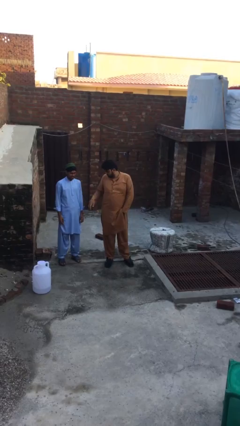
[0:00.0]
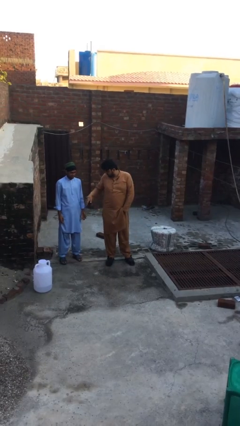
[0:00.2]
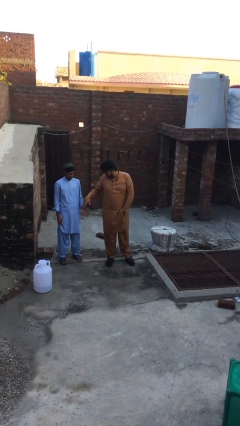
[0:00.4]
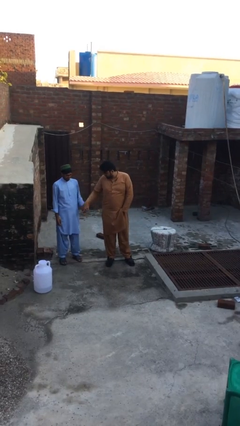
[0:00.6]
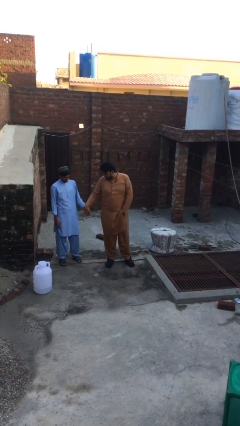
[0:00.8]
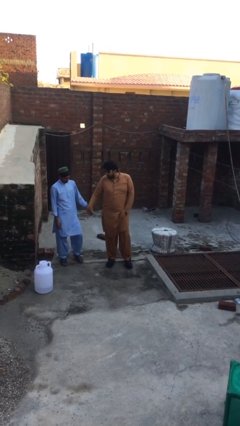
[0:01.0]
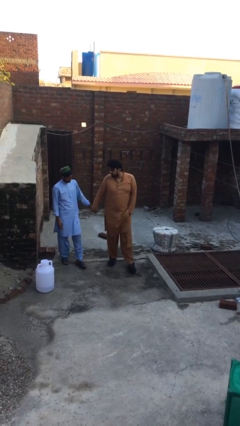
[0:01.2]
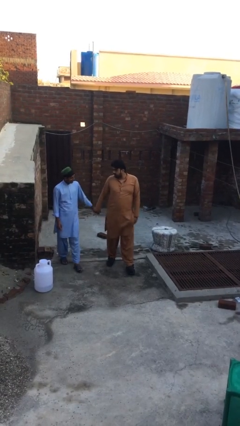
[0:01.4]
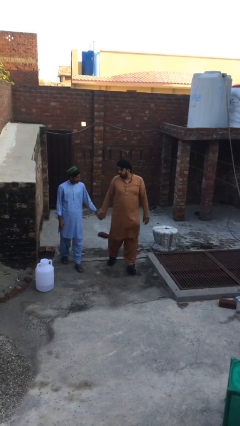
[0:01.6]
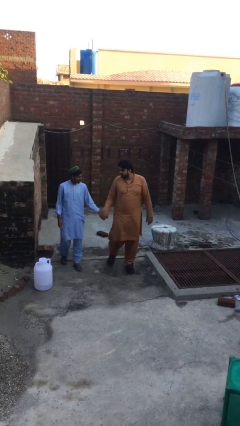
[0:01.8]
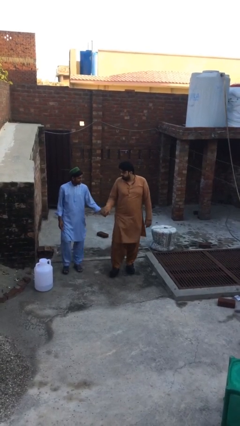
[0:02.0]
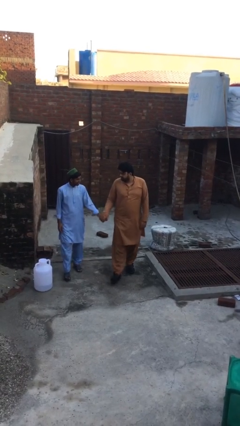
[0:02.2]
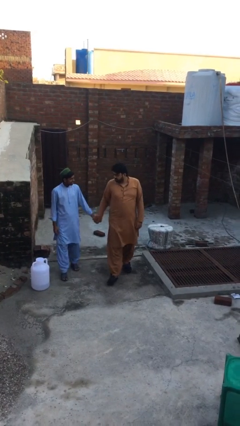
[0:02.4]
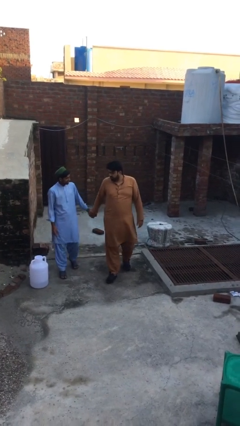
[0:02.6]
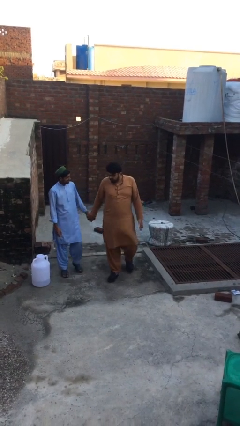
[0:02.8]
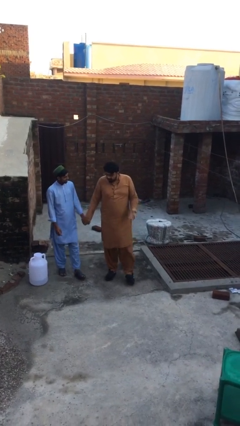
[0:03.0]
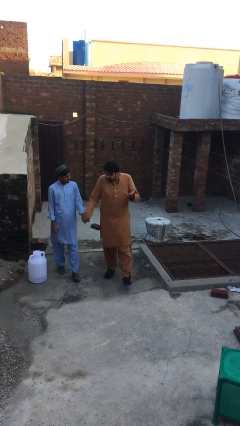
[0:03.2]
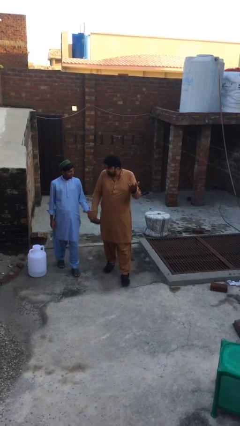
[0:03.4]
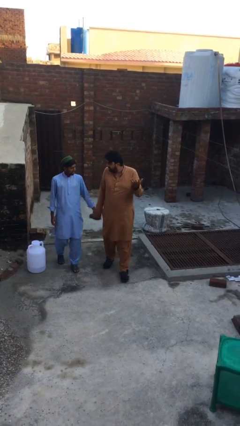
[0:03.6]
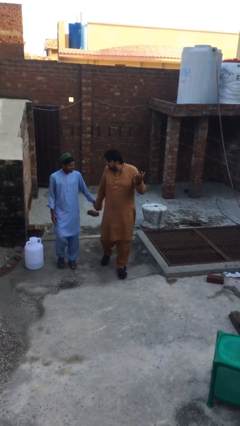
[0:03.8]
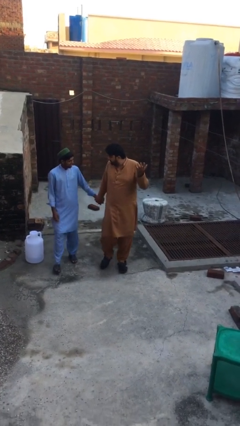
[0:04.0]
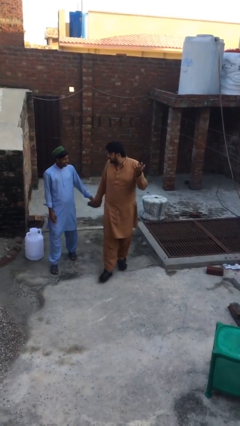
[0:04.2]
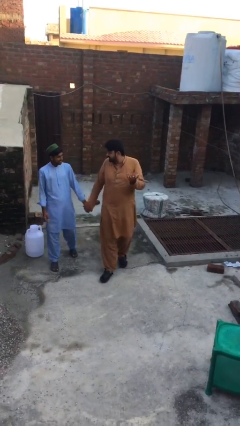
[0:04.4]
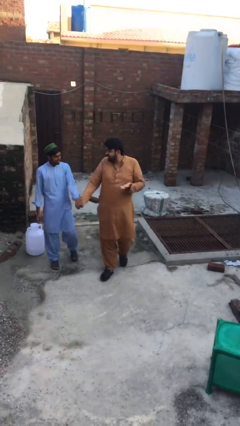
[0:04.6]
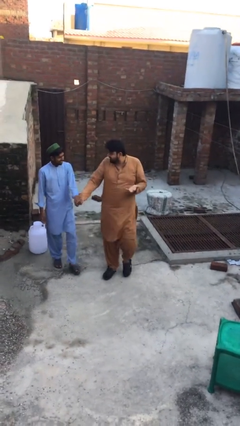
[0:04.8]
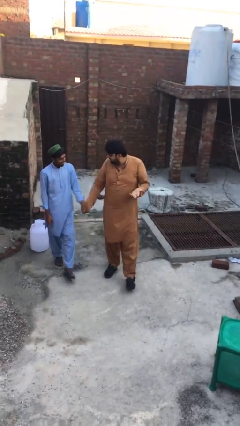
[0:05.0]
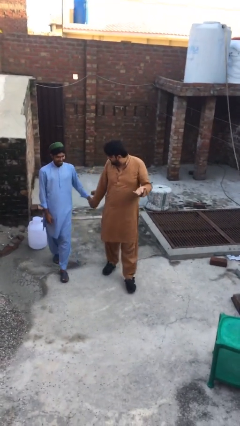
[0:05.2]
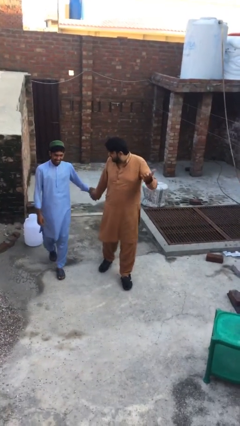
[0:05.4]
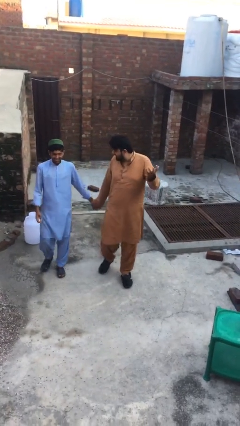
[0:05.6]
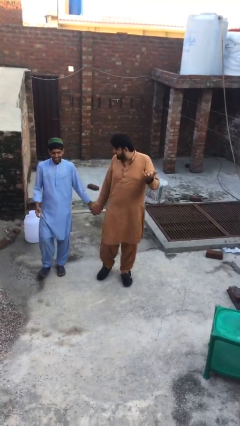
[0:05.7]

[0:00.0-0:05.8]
person holds hand

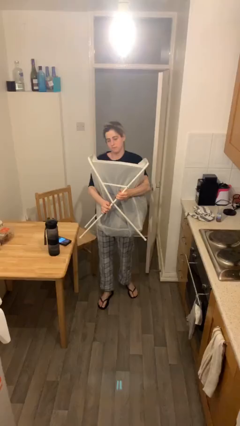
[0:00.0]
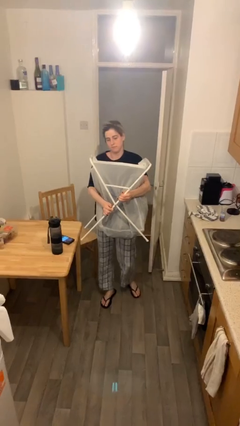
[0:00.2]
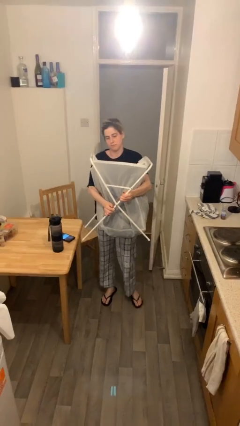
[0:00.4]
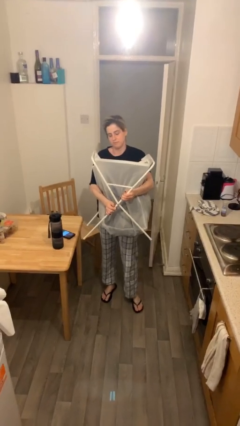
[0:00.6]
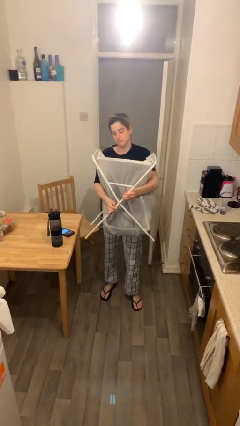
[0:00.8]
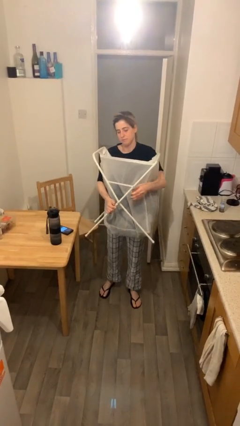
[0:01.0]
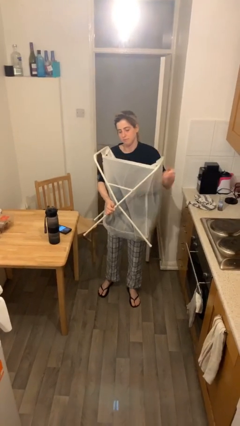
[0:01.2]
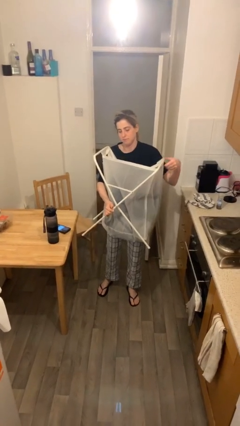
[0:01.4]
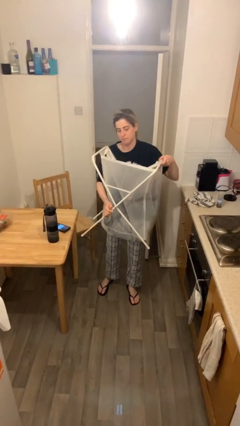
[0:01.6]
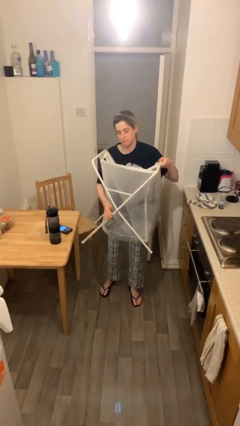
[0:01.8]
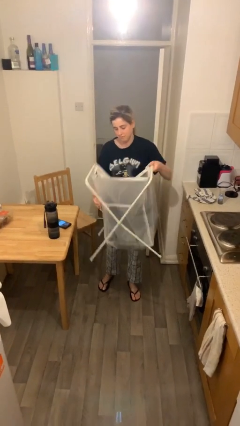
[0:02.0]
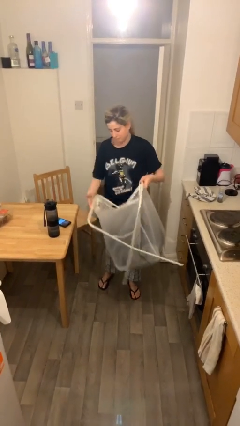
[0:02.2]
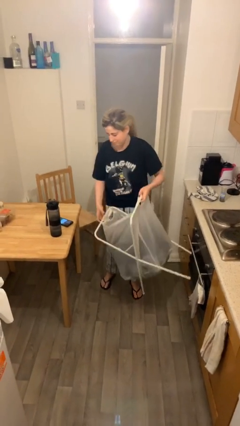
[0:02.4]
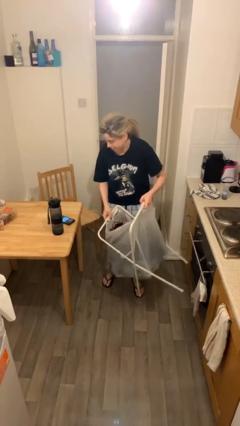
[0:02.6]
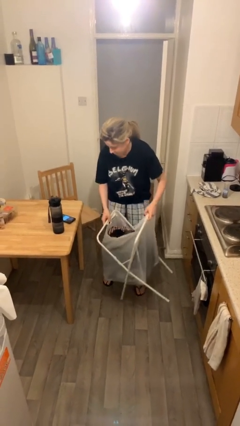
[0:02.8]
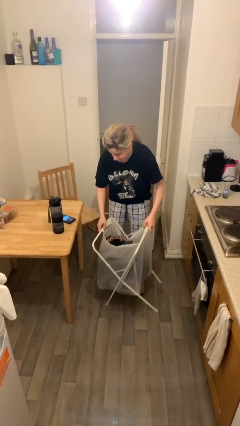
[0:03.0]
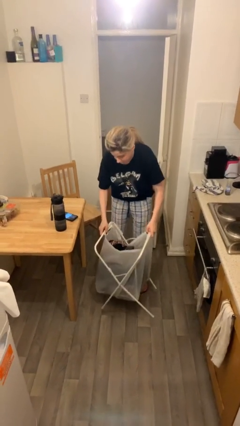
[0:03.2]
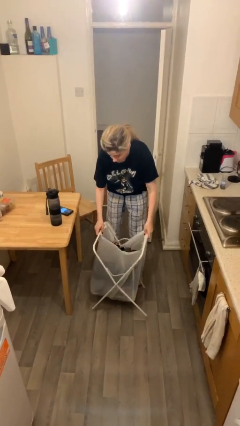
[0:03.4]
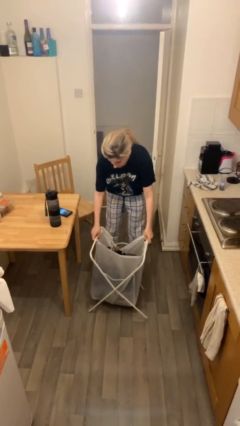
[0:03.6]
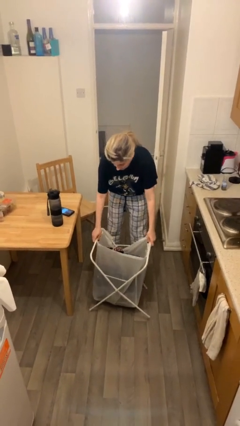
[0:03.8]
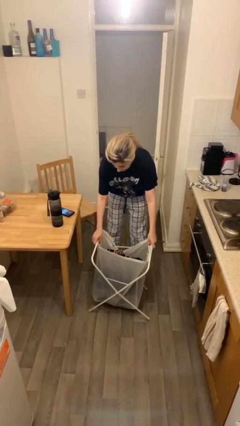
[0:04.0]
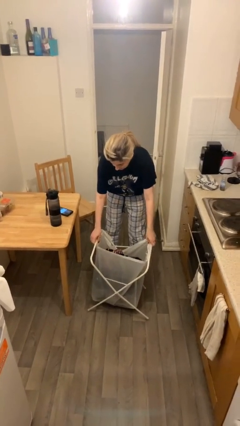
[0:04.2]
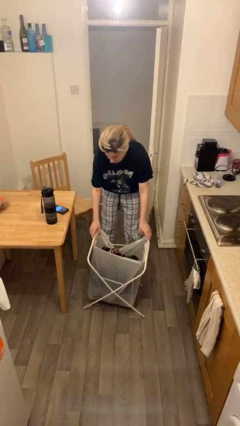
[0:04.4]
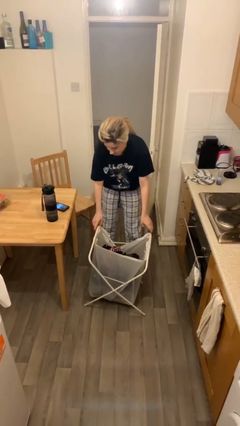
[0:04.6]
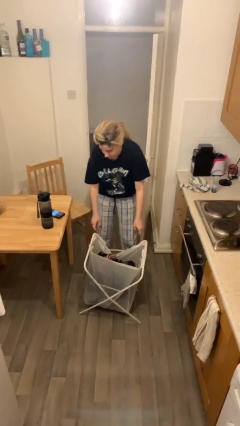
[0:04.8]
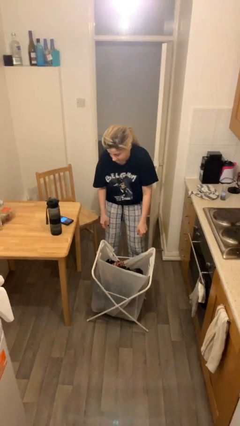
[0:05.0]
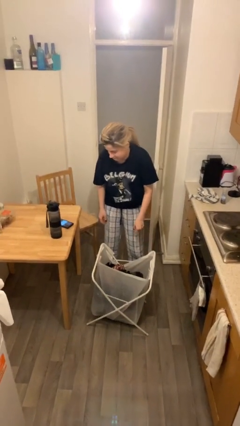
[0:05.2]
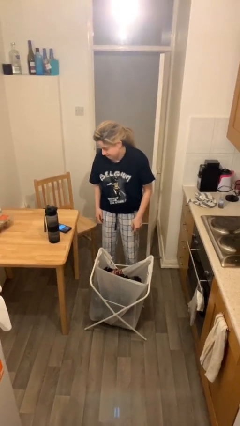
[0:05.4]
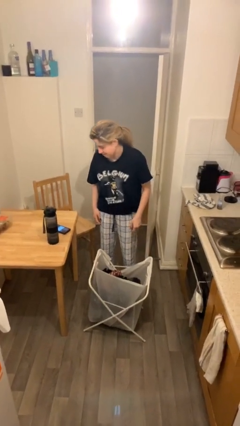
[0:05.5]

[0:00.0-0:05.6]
person puts down object on floor

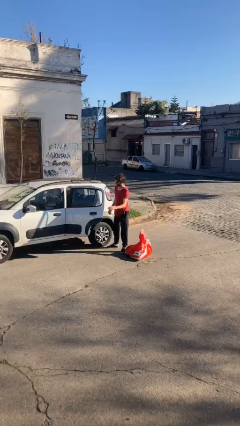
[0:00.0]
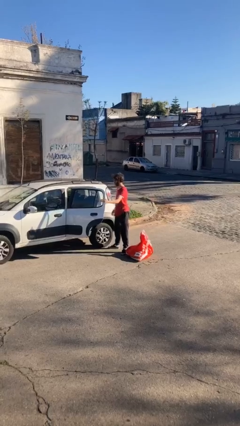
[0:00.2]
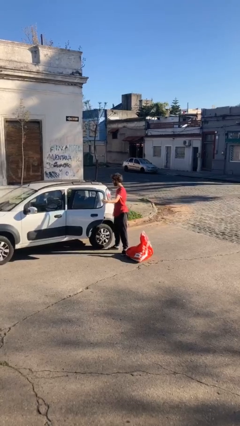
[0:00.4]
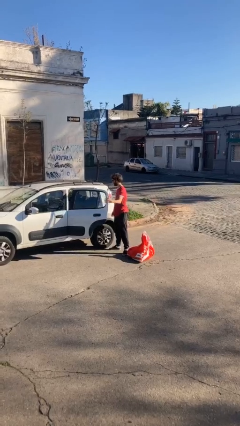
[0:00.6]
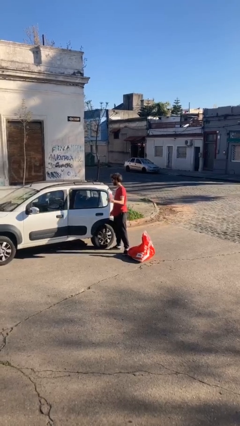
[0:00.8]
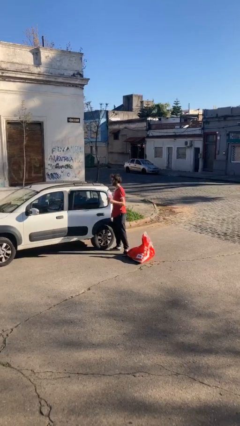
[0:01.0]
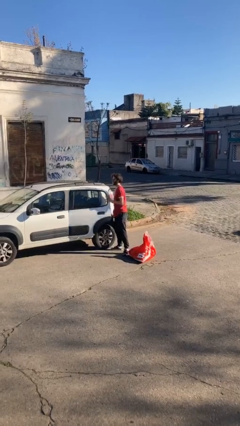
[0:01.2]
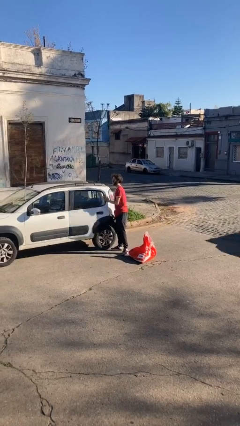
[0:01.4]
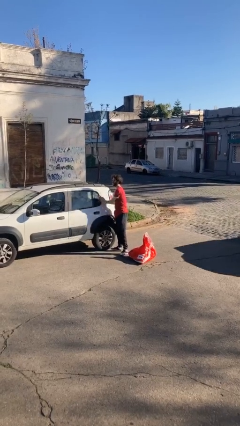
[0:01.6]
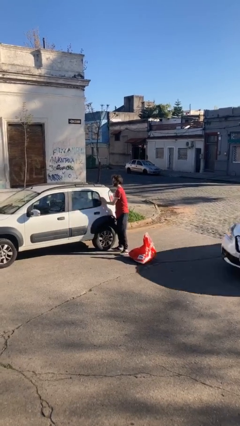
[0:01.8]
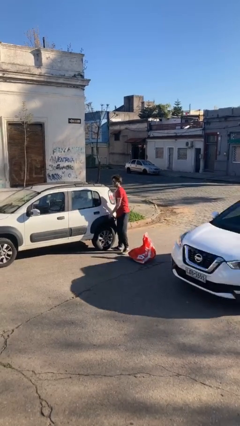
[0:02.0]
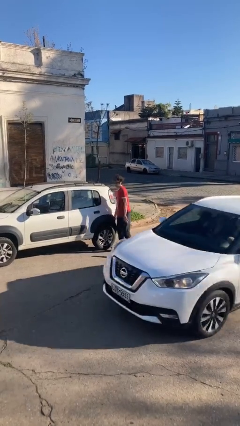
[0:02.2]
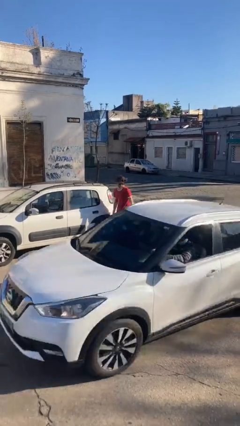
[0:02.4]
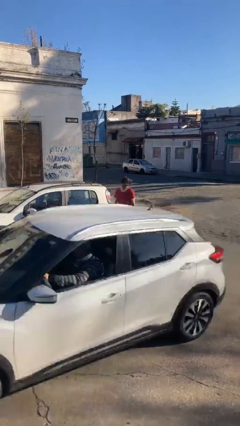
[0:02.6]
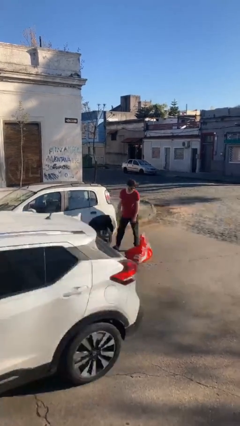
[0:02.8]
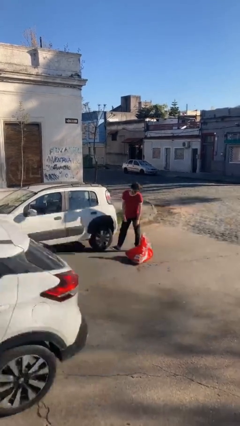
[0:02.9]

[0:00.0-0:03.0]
person closes car door

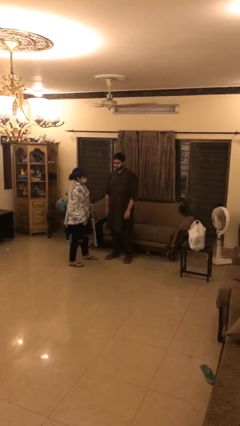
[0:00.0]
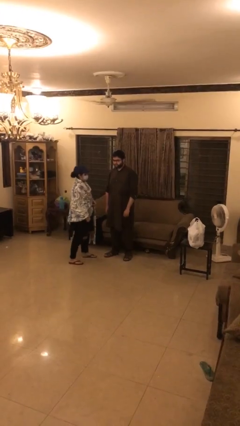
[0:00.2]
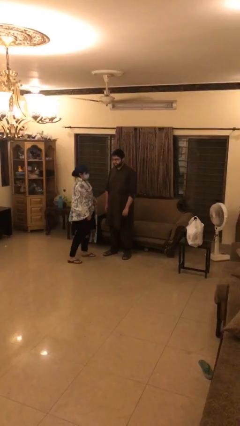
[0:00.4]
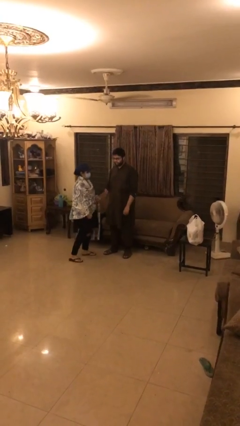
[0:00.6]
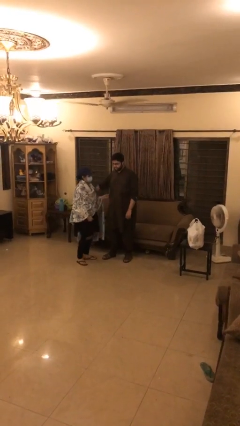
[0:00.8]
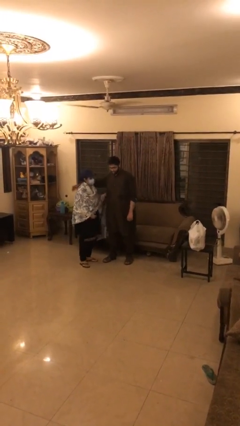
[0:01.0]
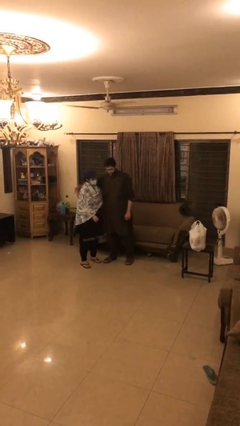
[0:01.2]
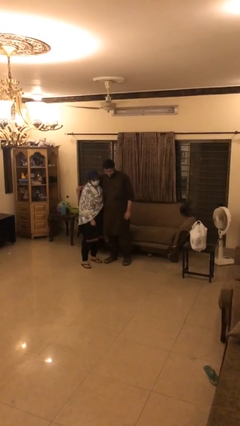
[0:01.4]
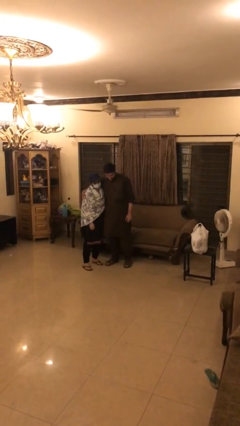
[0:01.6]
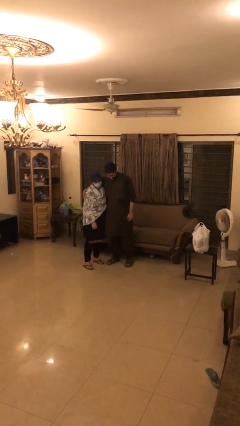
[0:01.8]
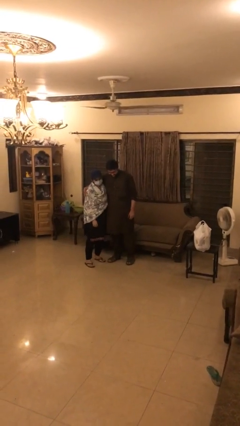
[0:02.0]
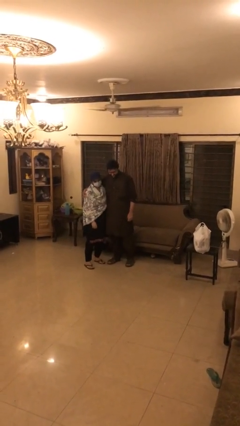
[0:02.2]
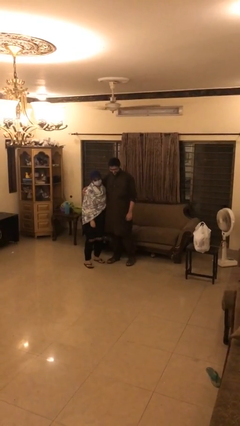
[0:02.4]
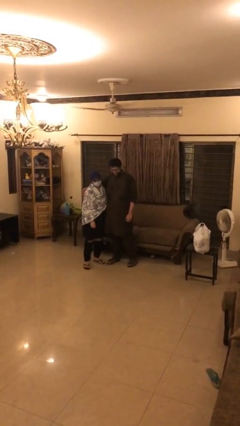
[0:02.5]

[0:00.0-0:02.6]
person embraces person

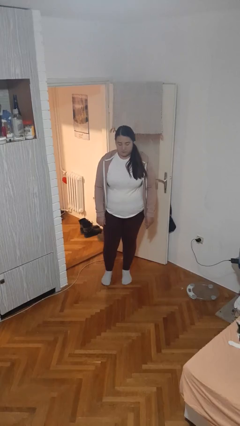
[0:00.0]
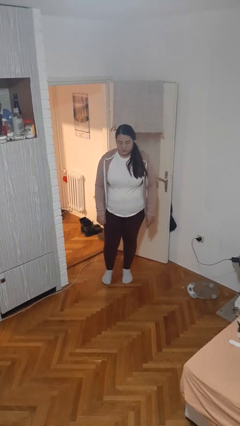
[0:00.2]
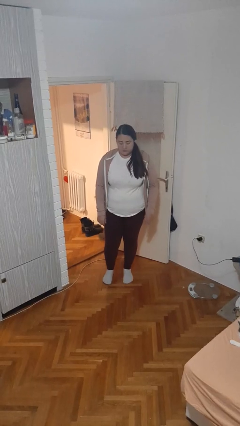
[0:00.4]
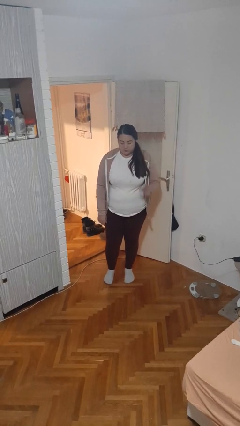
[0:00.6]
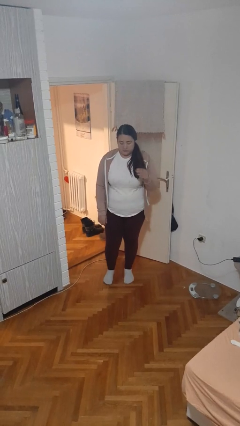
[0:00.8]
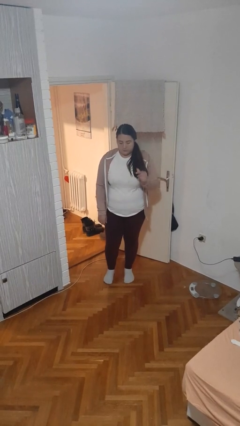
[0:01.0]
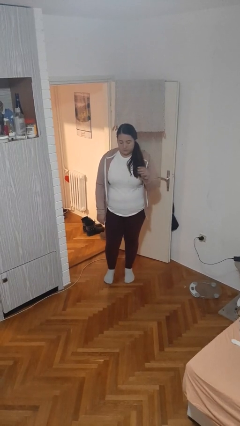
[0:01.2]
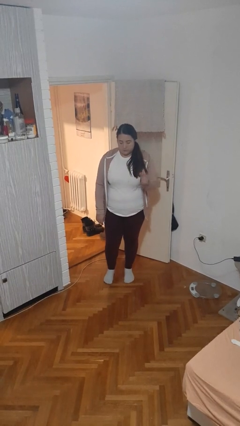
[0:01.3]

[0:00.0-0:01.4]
person snaps fingers
